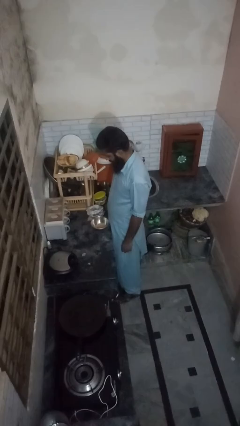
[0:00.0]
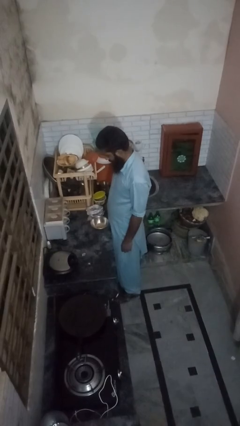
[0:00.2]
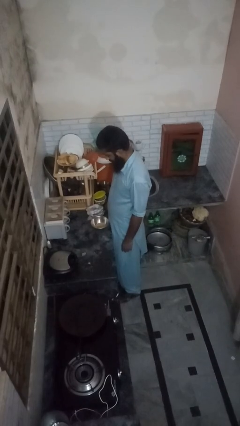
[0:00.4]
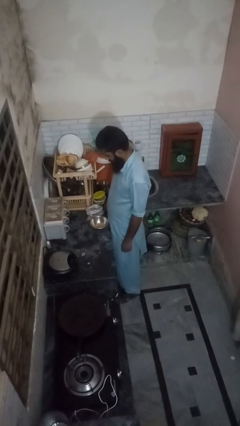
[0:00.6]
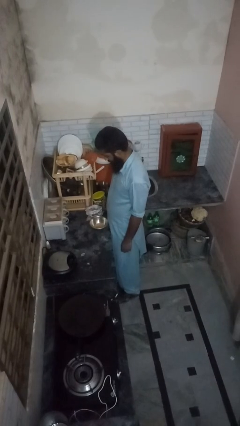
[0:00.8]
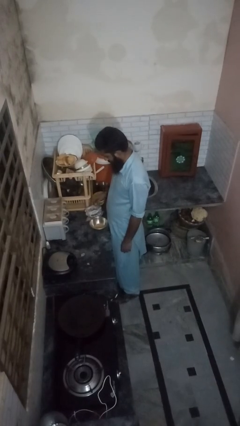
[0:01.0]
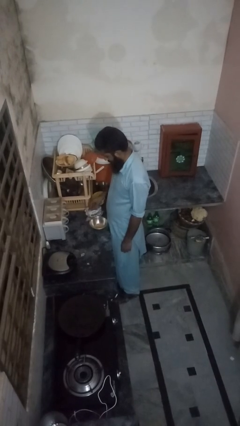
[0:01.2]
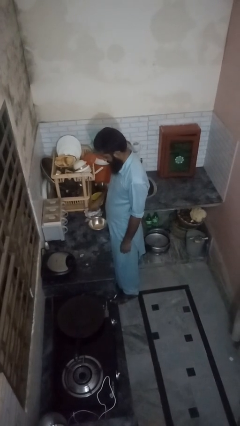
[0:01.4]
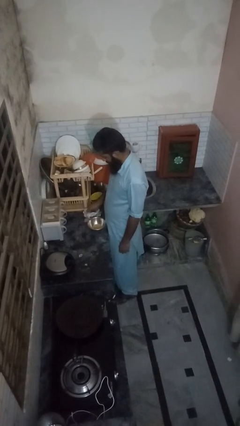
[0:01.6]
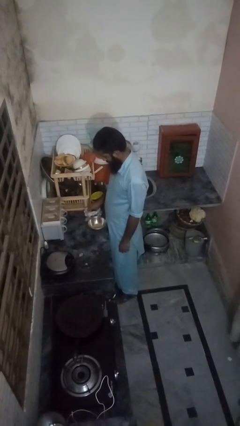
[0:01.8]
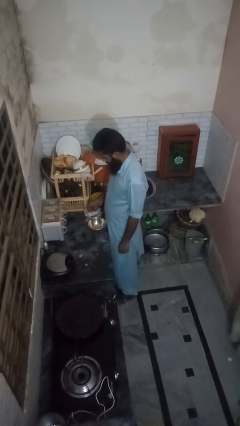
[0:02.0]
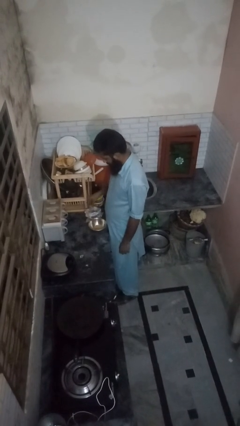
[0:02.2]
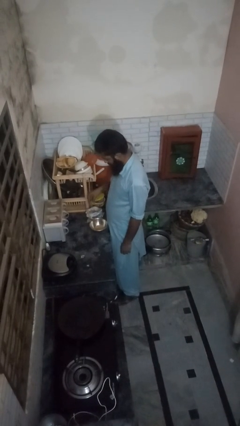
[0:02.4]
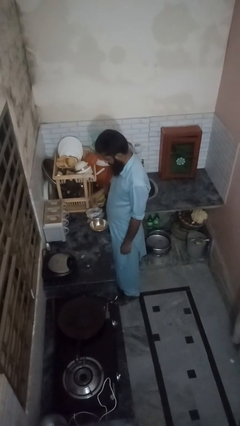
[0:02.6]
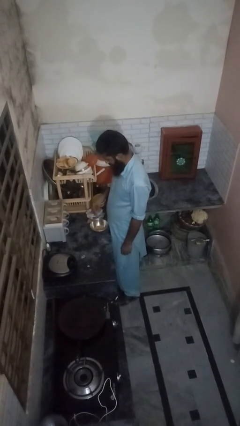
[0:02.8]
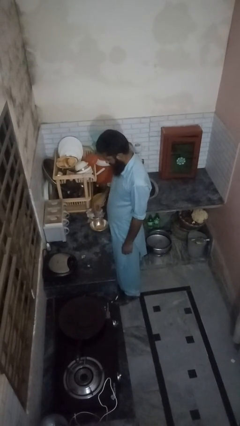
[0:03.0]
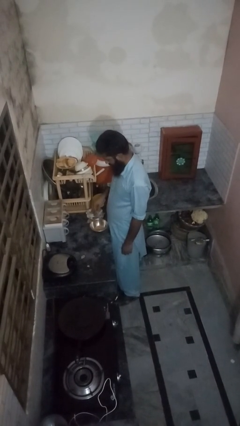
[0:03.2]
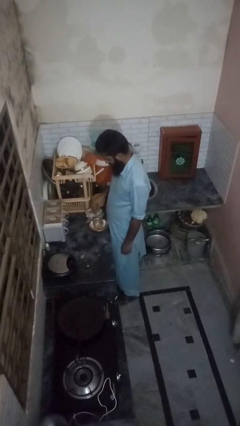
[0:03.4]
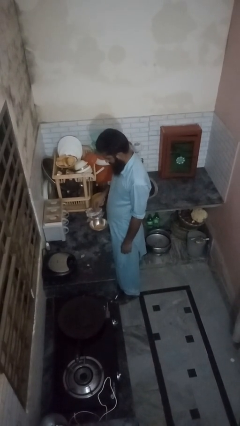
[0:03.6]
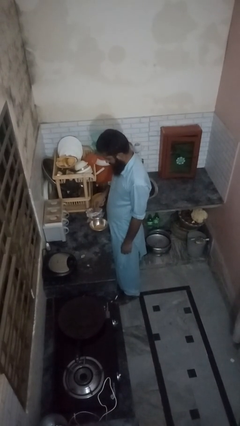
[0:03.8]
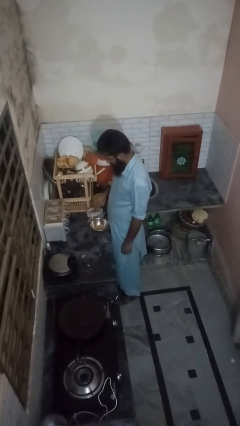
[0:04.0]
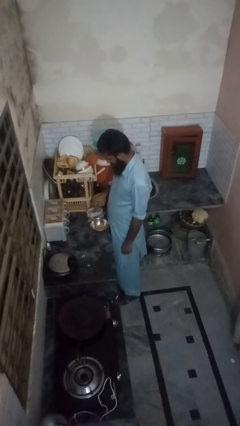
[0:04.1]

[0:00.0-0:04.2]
person pours into bowl

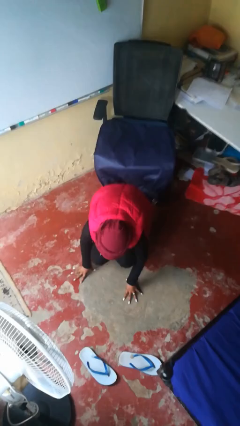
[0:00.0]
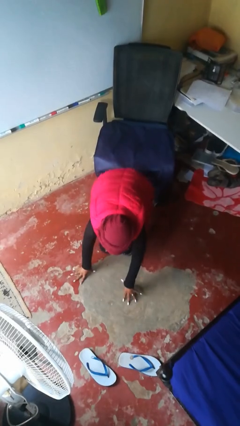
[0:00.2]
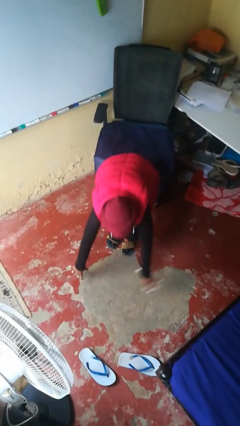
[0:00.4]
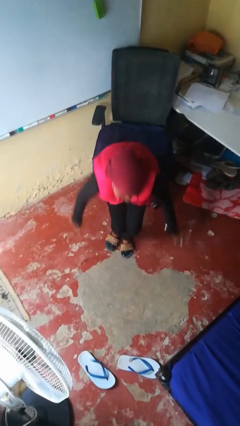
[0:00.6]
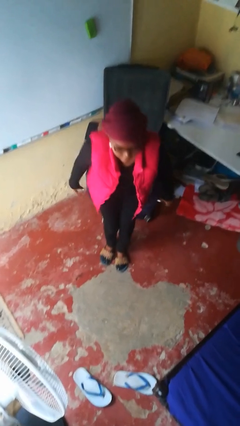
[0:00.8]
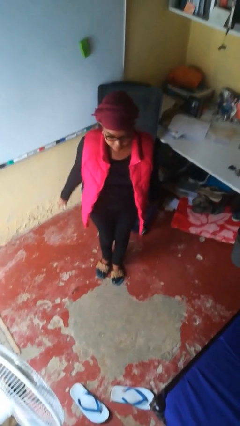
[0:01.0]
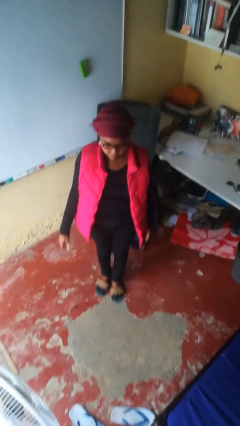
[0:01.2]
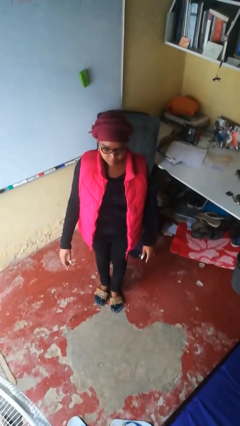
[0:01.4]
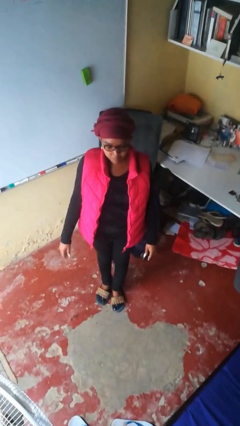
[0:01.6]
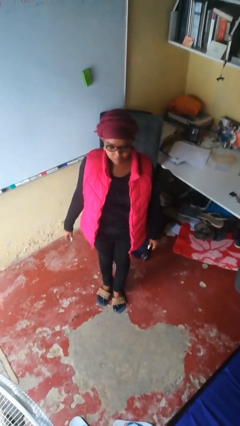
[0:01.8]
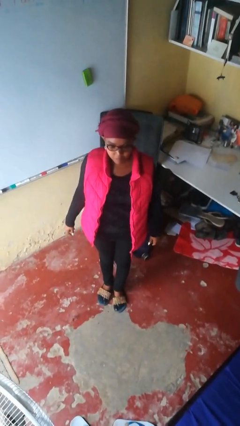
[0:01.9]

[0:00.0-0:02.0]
person stands up from floor

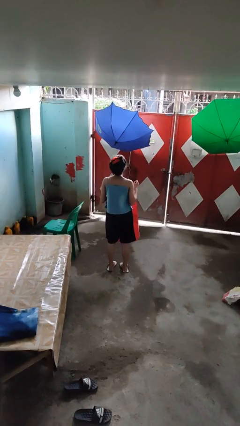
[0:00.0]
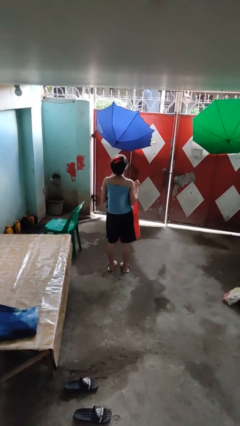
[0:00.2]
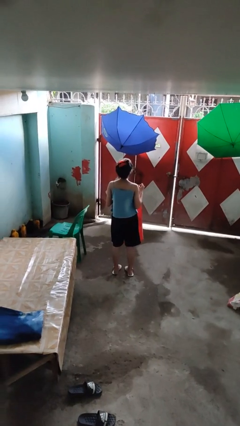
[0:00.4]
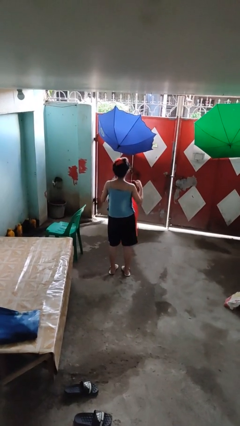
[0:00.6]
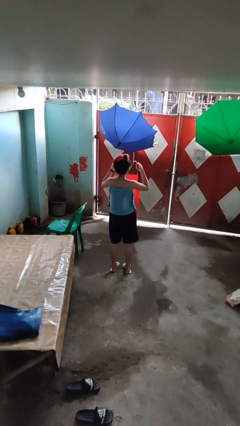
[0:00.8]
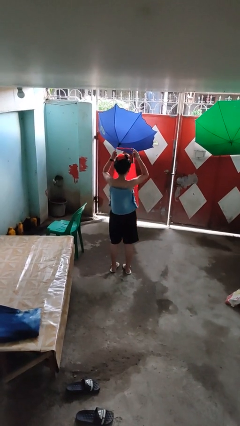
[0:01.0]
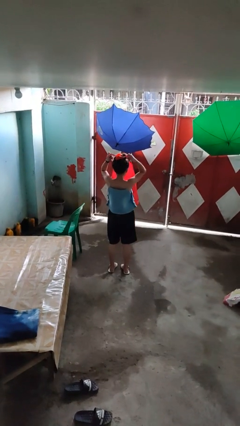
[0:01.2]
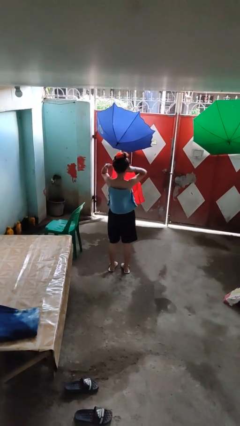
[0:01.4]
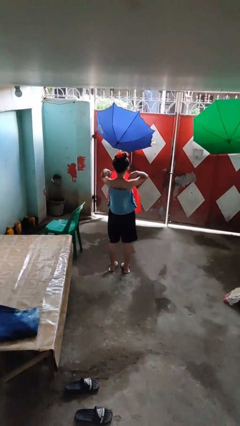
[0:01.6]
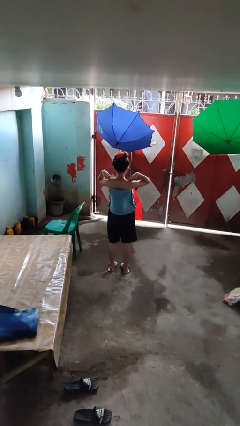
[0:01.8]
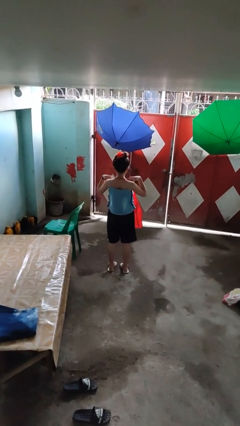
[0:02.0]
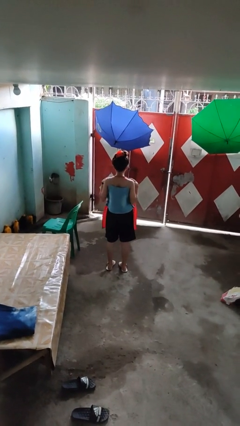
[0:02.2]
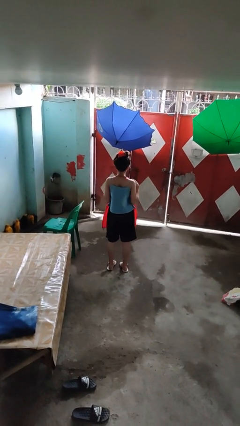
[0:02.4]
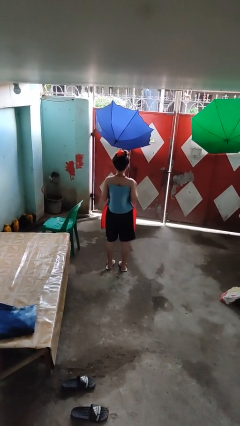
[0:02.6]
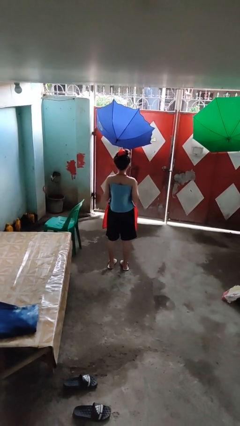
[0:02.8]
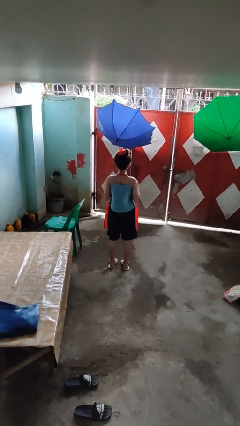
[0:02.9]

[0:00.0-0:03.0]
person puts on apron

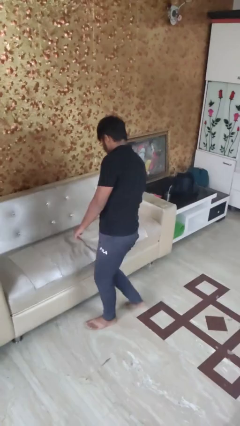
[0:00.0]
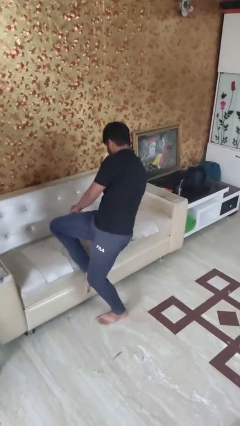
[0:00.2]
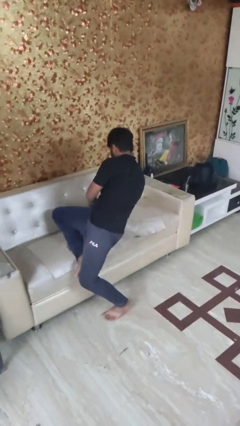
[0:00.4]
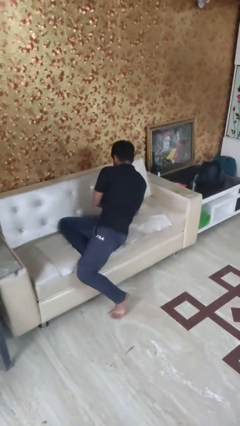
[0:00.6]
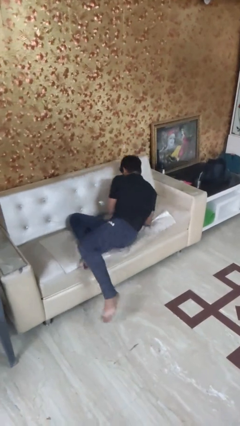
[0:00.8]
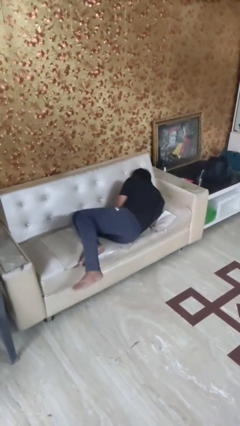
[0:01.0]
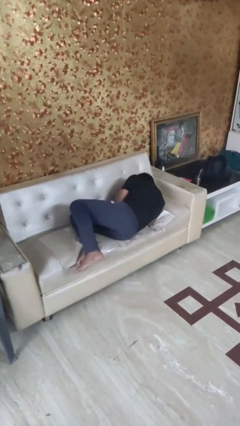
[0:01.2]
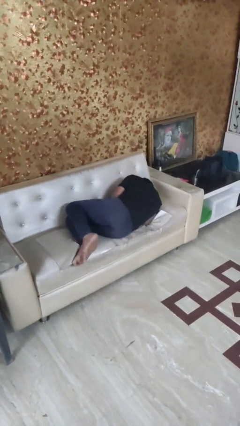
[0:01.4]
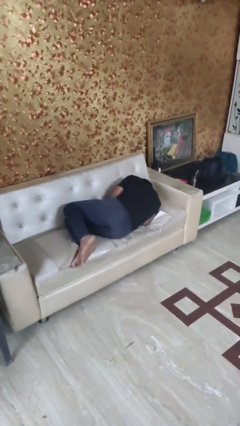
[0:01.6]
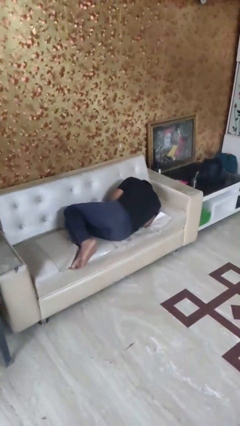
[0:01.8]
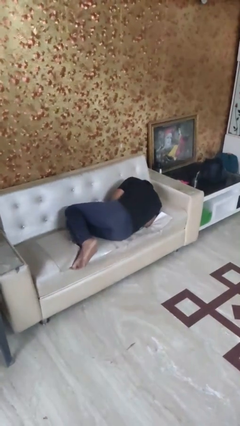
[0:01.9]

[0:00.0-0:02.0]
person lies down on couch

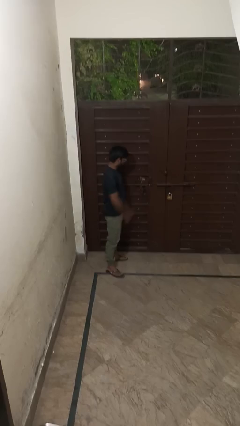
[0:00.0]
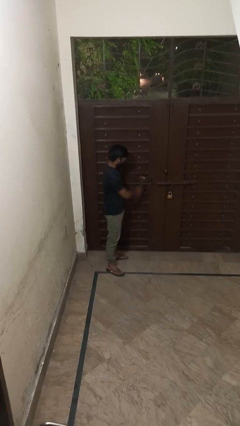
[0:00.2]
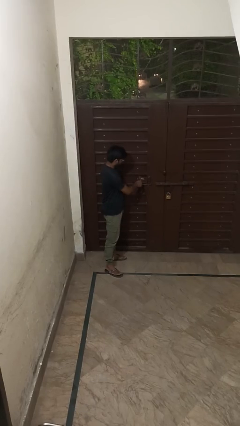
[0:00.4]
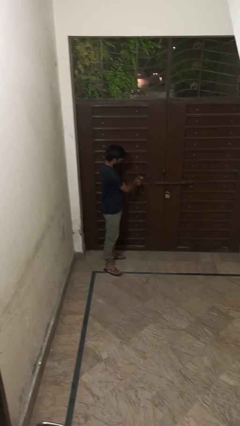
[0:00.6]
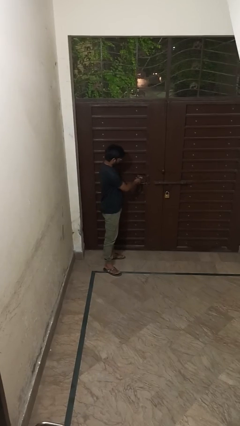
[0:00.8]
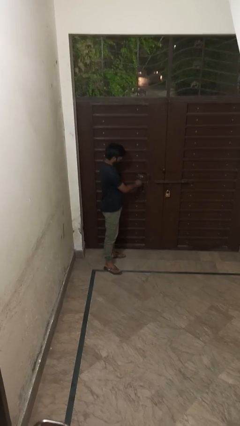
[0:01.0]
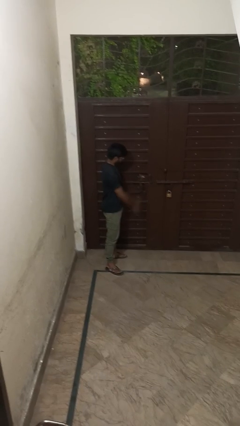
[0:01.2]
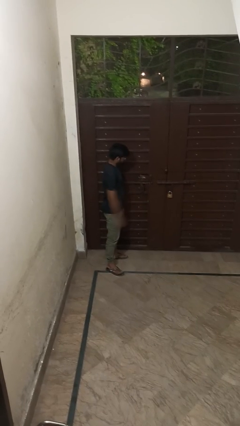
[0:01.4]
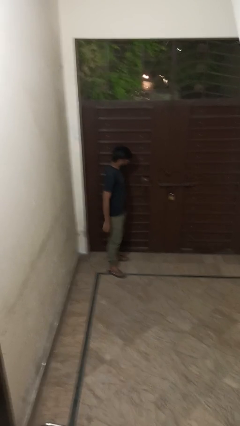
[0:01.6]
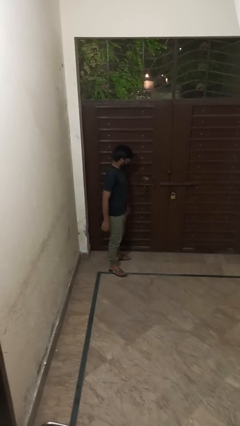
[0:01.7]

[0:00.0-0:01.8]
person locks door with keys

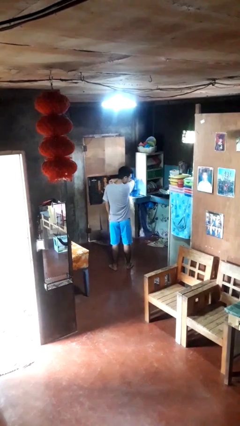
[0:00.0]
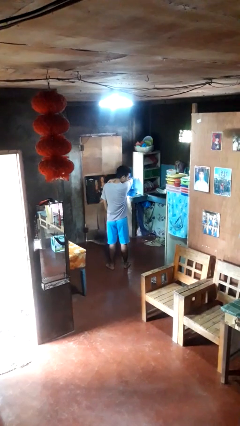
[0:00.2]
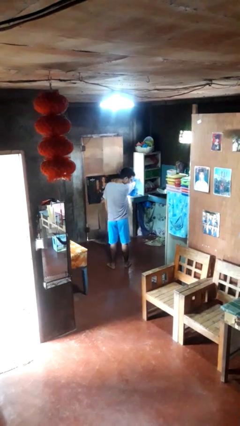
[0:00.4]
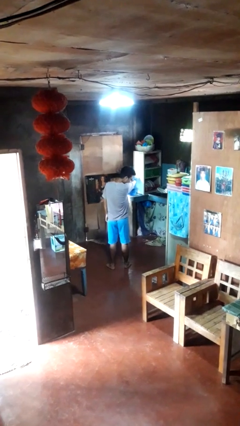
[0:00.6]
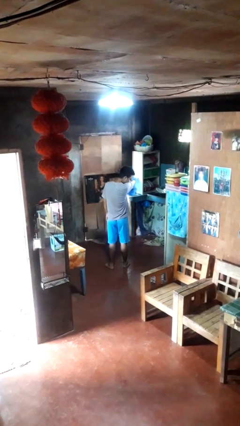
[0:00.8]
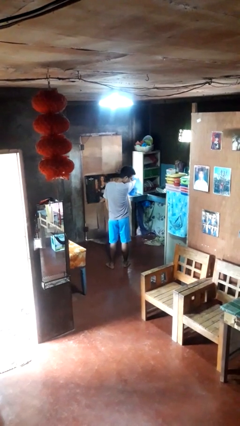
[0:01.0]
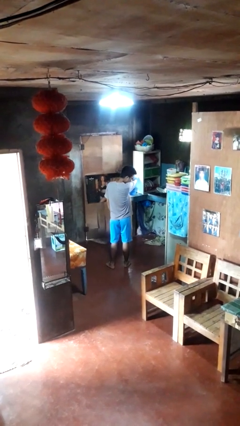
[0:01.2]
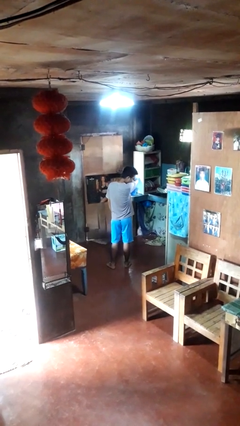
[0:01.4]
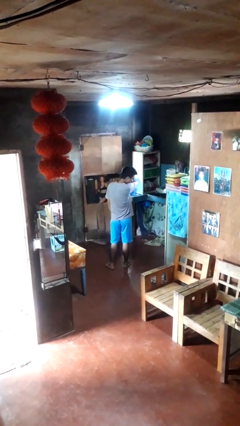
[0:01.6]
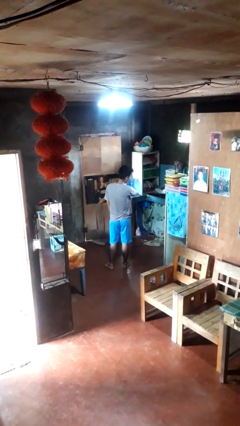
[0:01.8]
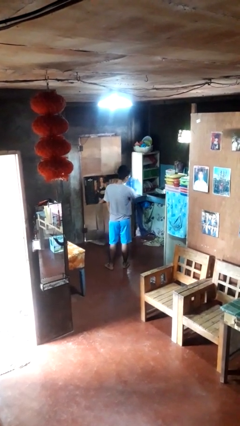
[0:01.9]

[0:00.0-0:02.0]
person sneezes into arm

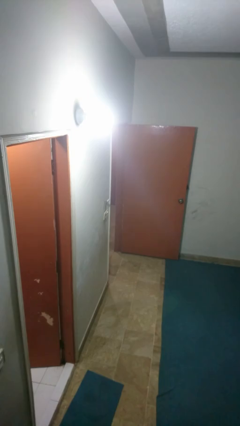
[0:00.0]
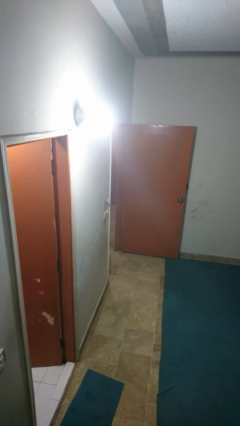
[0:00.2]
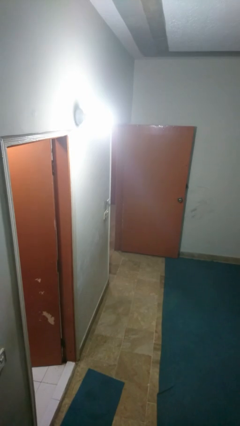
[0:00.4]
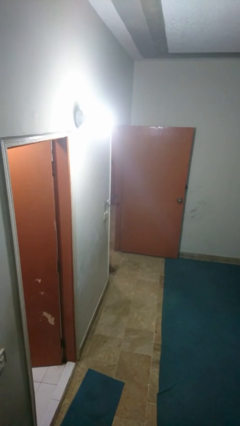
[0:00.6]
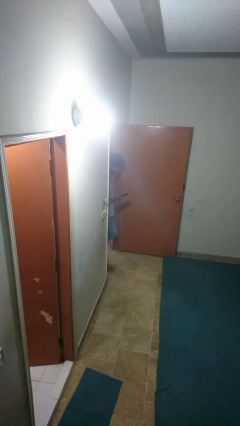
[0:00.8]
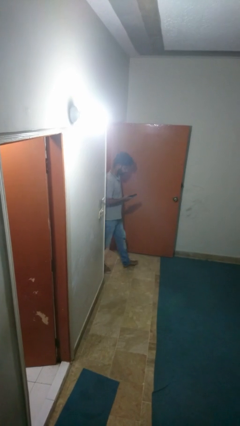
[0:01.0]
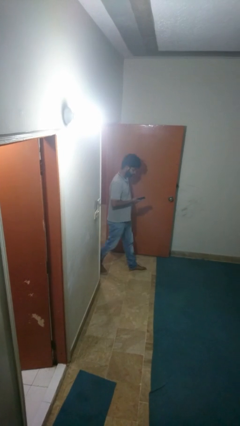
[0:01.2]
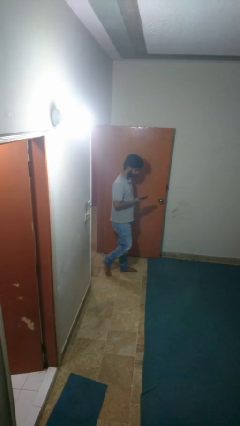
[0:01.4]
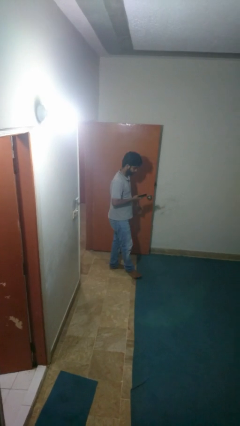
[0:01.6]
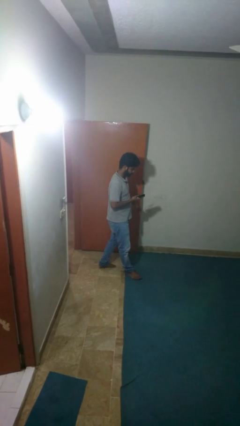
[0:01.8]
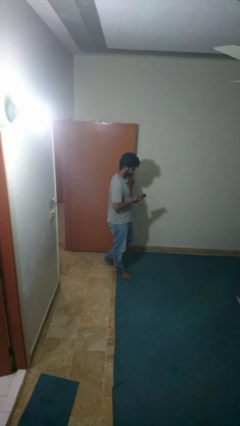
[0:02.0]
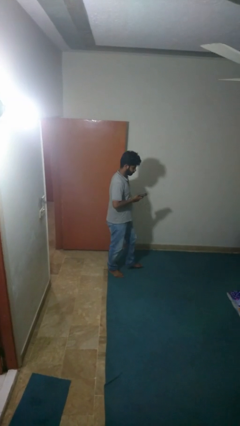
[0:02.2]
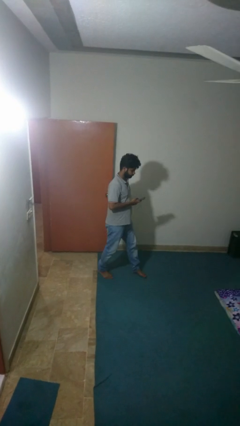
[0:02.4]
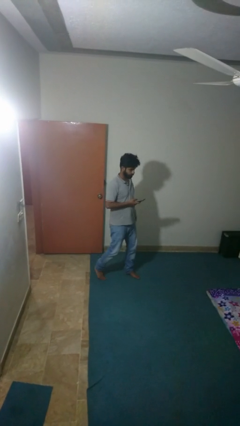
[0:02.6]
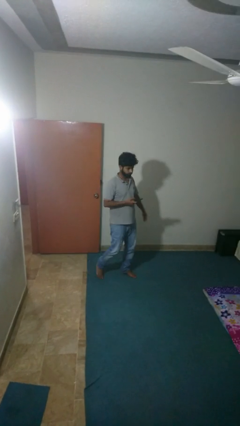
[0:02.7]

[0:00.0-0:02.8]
person enters scene through structure
